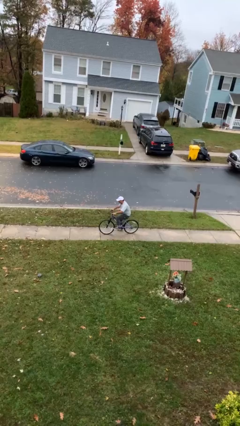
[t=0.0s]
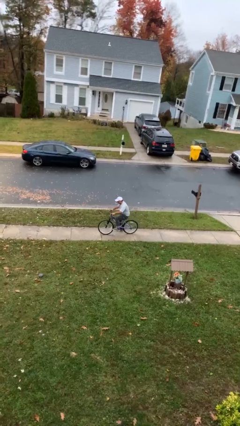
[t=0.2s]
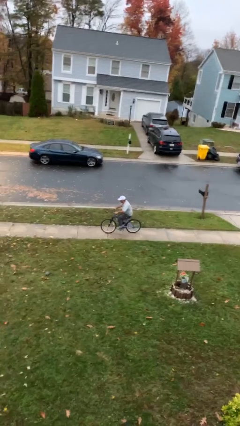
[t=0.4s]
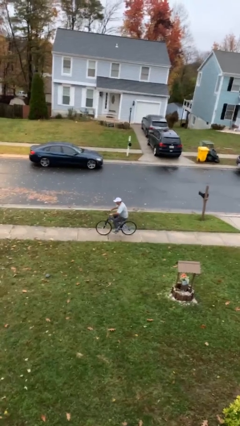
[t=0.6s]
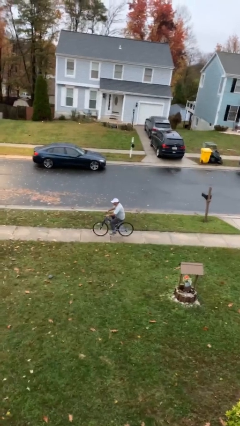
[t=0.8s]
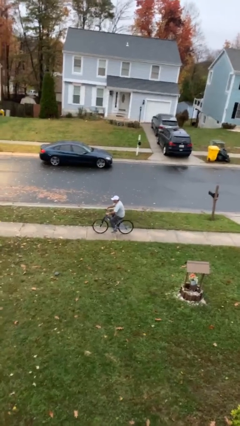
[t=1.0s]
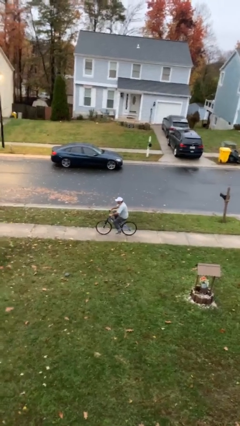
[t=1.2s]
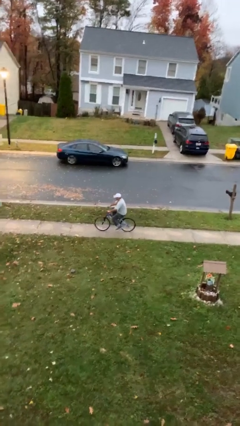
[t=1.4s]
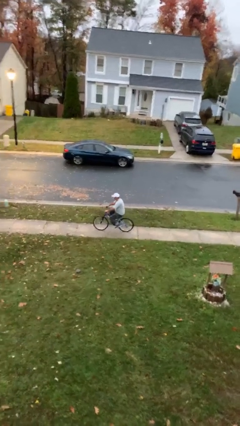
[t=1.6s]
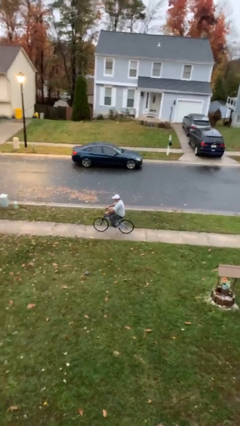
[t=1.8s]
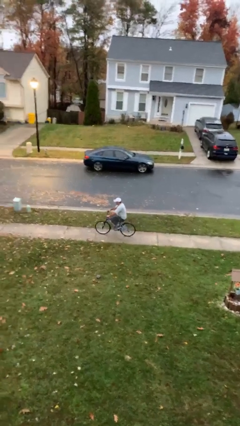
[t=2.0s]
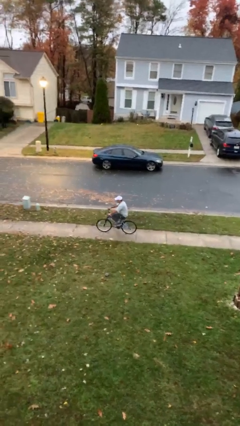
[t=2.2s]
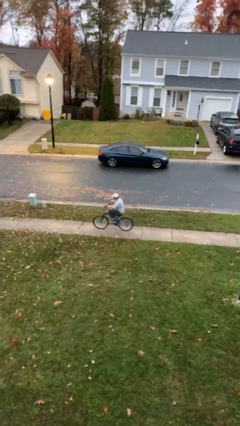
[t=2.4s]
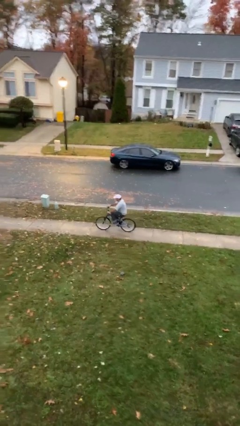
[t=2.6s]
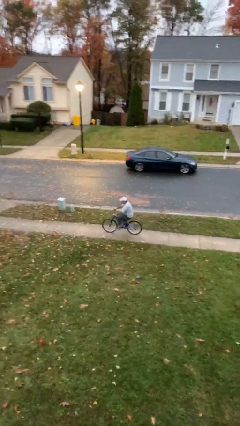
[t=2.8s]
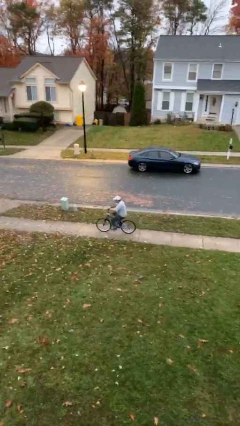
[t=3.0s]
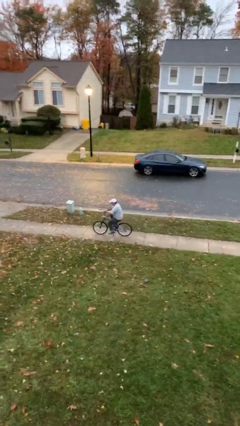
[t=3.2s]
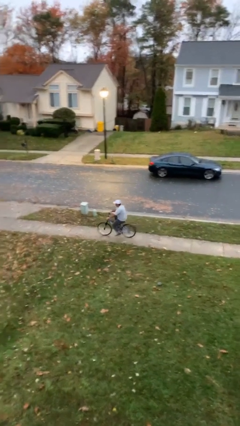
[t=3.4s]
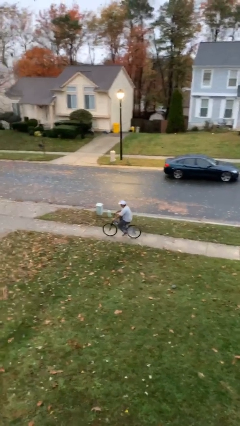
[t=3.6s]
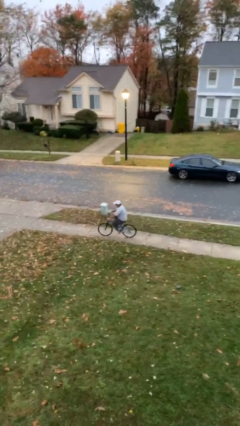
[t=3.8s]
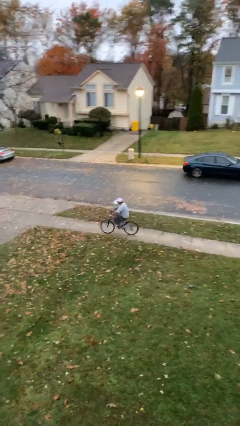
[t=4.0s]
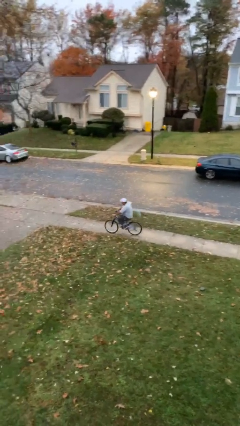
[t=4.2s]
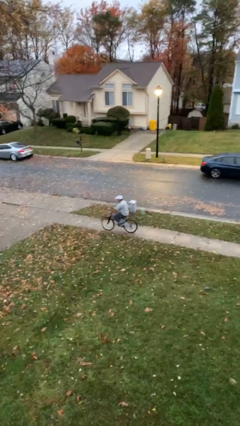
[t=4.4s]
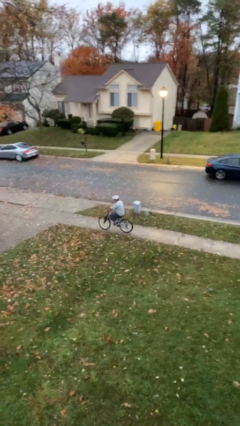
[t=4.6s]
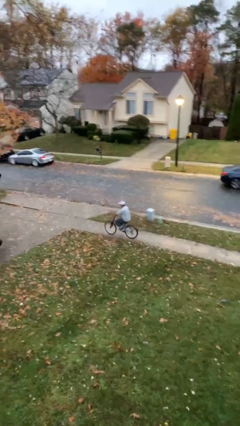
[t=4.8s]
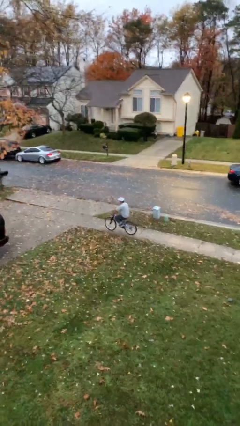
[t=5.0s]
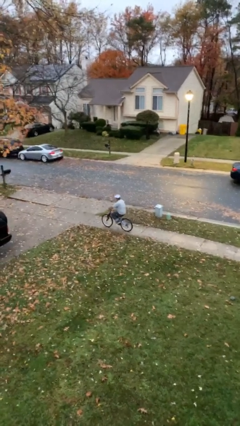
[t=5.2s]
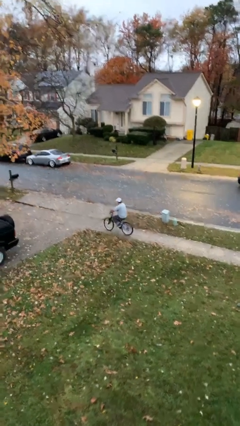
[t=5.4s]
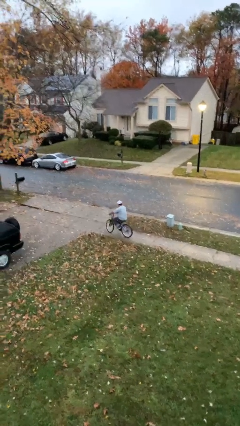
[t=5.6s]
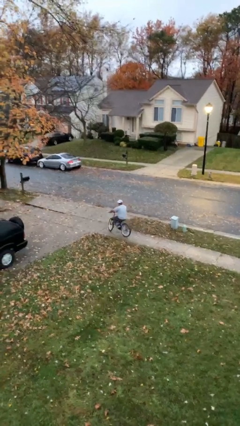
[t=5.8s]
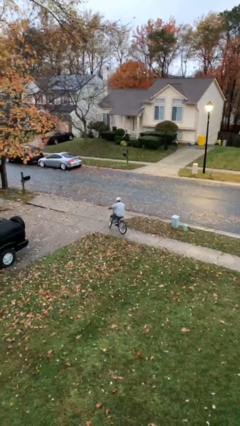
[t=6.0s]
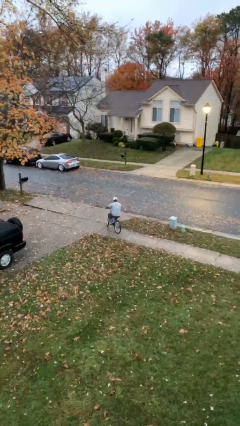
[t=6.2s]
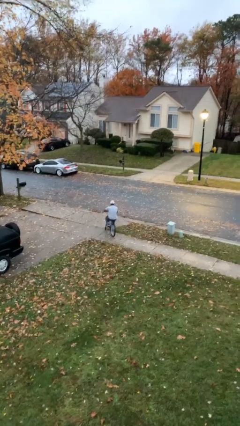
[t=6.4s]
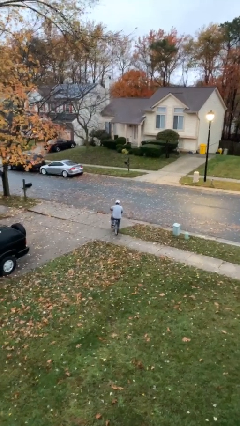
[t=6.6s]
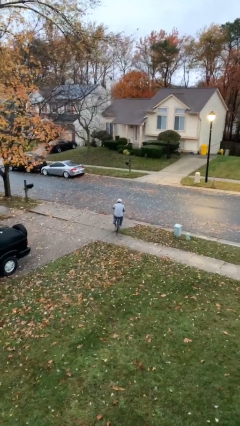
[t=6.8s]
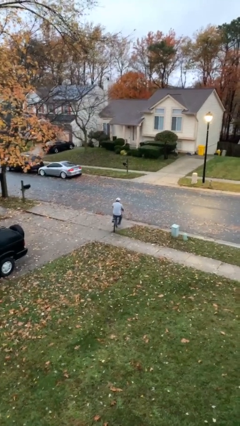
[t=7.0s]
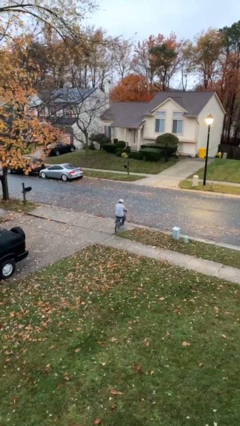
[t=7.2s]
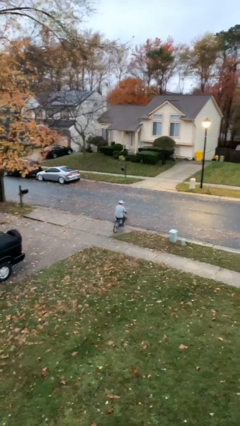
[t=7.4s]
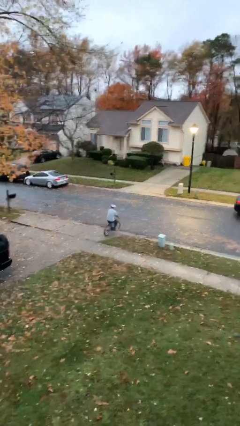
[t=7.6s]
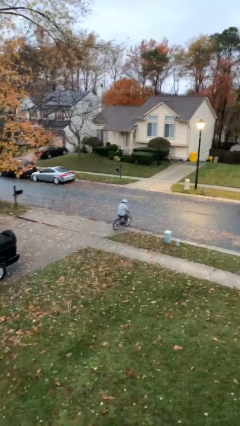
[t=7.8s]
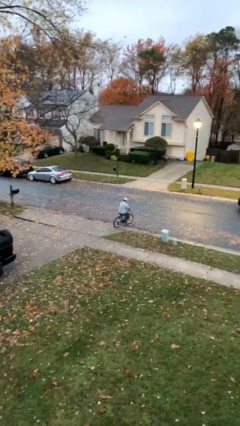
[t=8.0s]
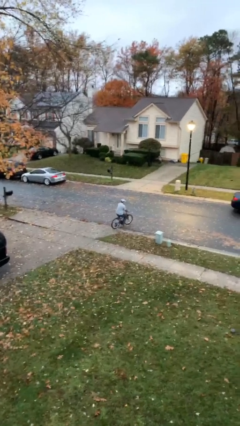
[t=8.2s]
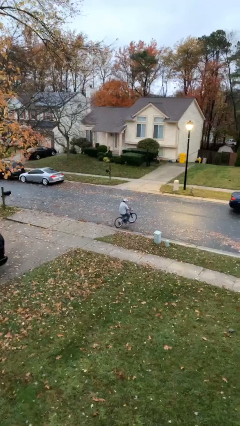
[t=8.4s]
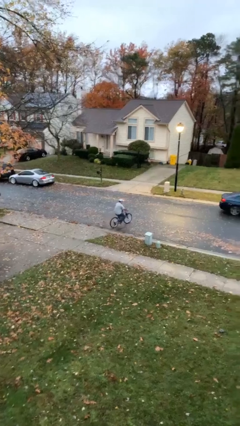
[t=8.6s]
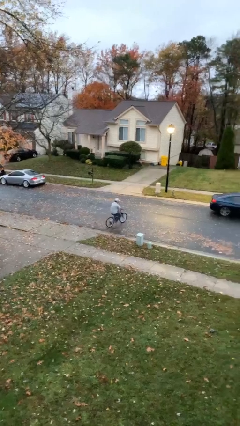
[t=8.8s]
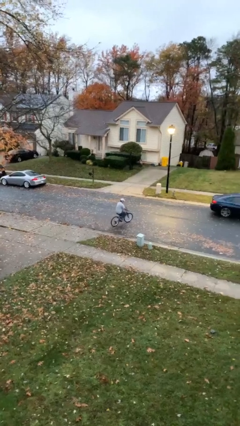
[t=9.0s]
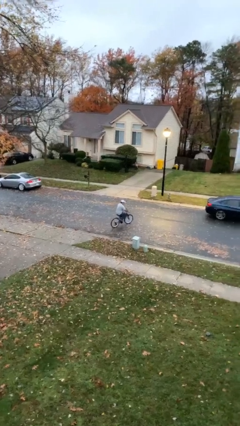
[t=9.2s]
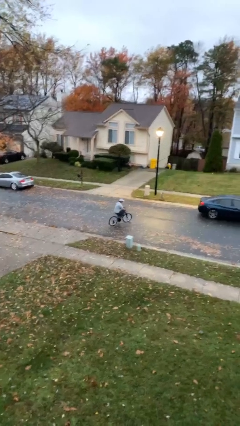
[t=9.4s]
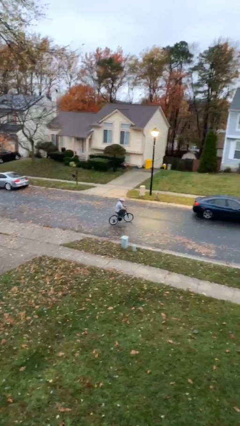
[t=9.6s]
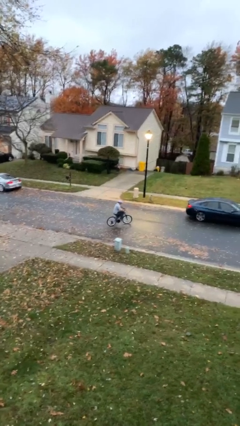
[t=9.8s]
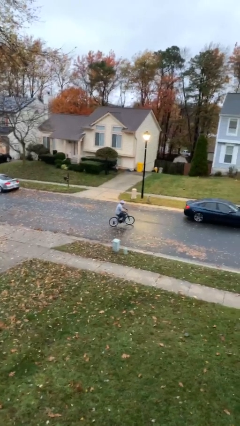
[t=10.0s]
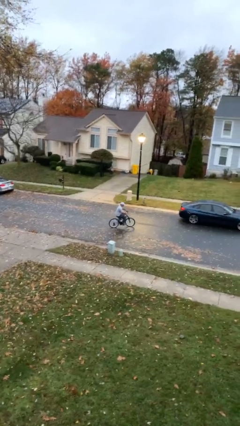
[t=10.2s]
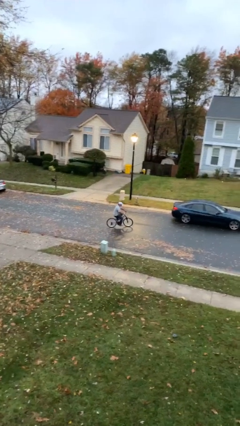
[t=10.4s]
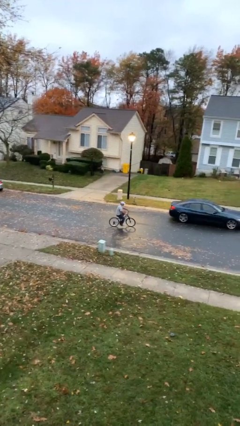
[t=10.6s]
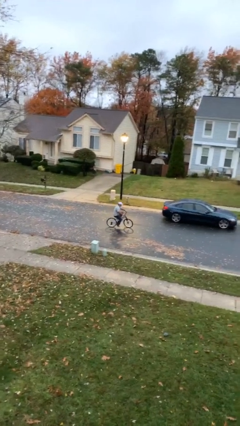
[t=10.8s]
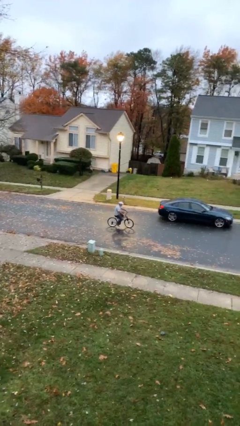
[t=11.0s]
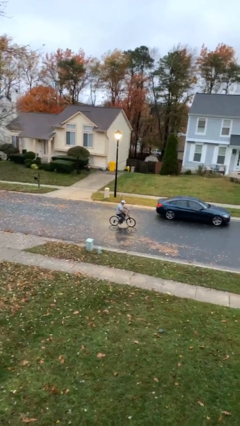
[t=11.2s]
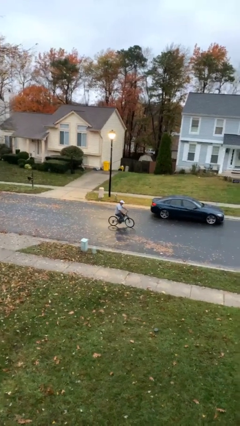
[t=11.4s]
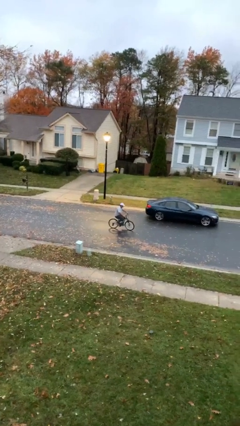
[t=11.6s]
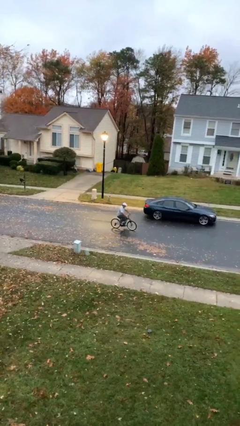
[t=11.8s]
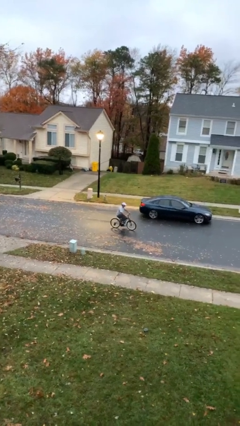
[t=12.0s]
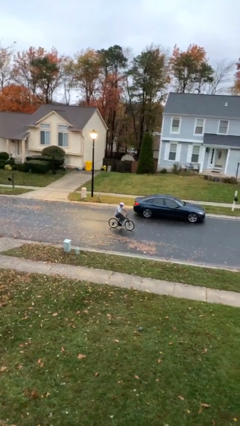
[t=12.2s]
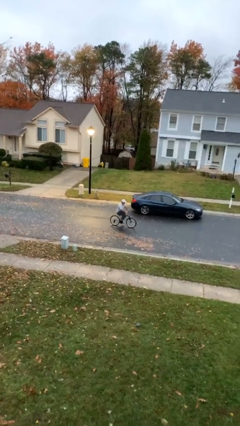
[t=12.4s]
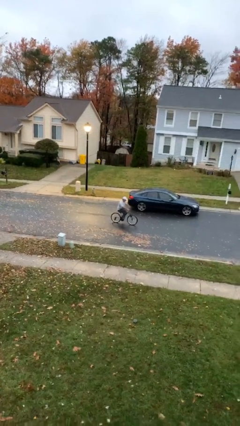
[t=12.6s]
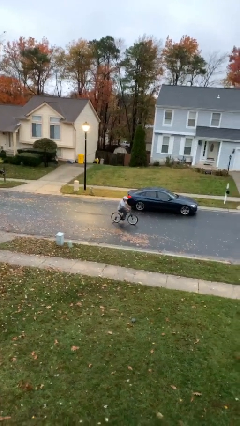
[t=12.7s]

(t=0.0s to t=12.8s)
person rides bicycle

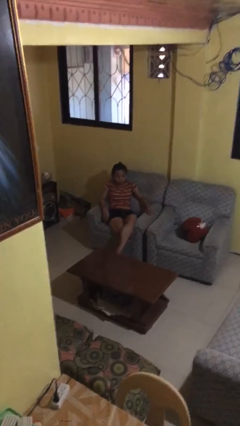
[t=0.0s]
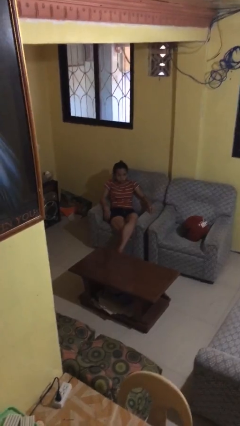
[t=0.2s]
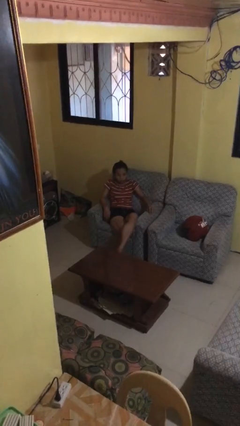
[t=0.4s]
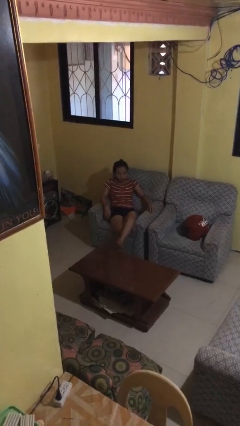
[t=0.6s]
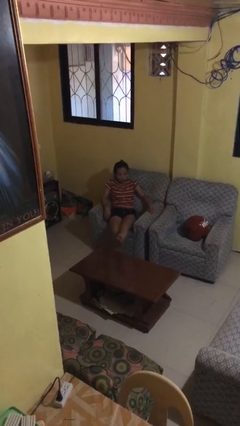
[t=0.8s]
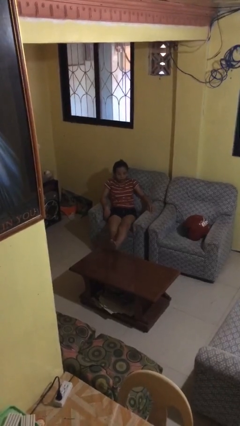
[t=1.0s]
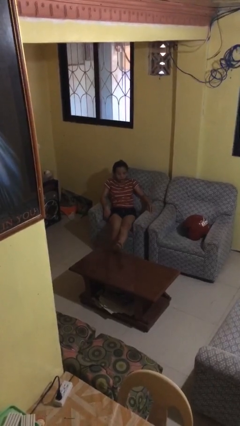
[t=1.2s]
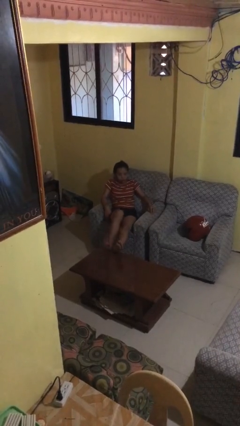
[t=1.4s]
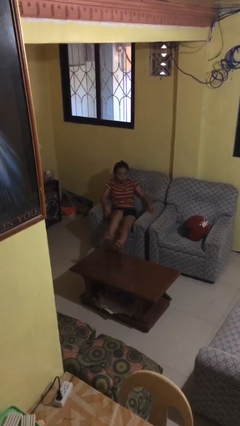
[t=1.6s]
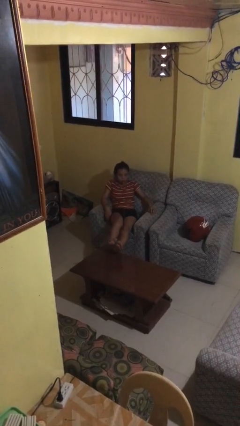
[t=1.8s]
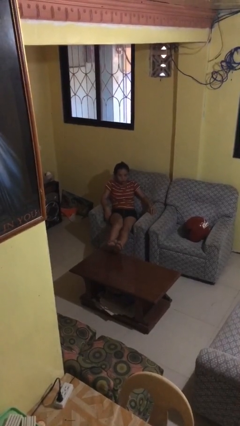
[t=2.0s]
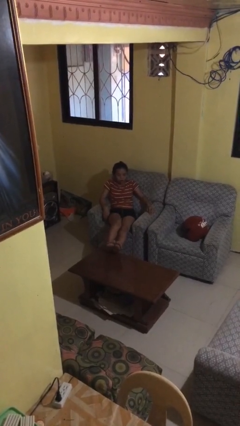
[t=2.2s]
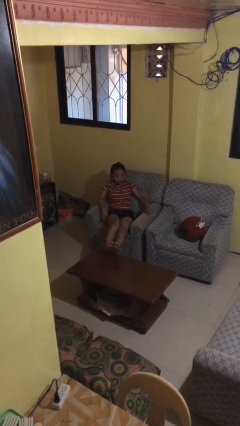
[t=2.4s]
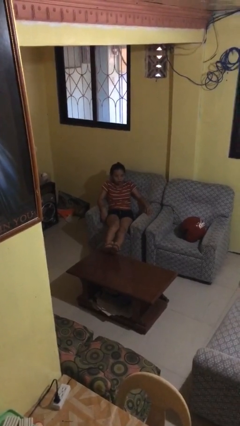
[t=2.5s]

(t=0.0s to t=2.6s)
person puts feet up

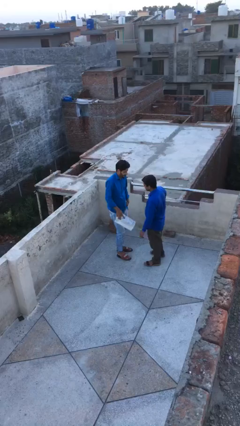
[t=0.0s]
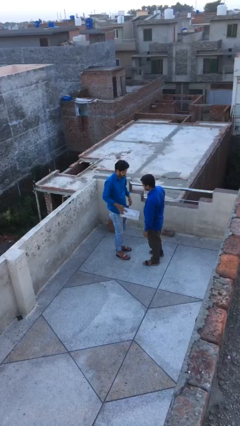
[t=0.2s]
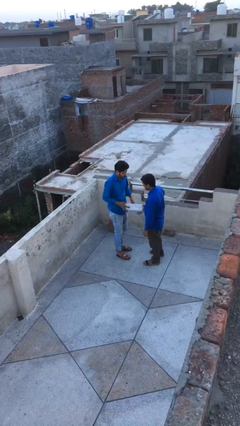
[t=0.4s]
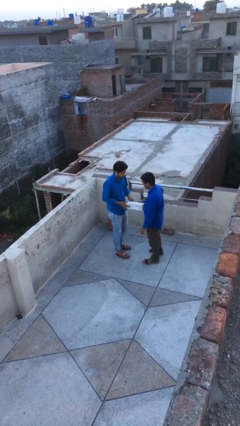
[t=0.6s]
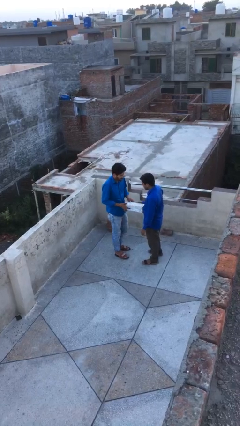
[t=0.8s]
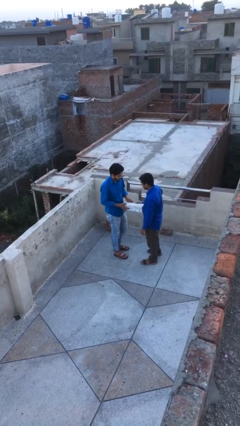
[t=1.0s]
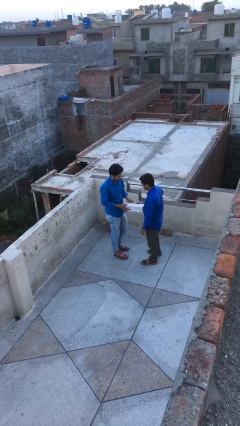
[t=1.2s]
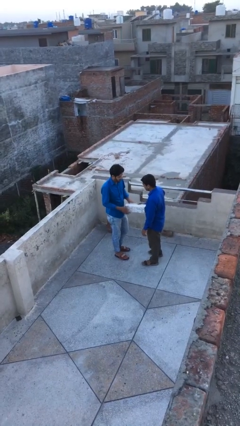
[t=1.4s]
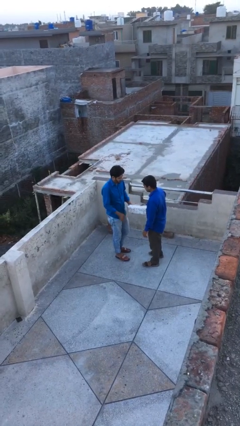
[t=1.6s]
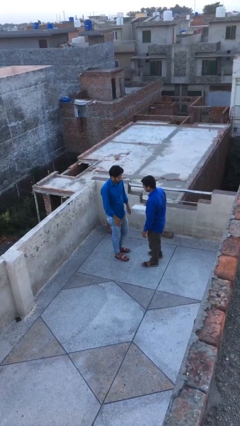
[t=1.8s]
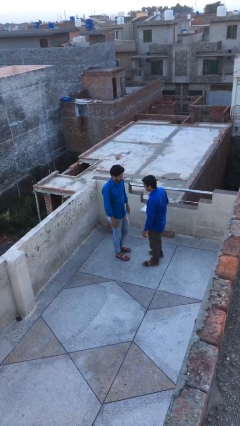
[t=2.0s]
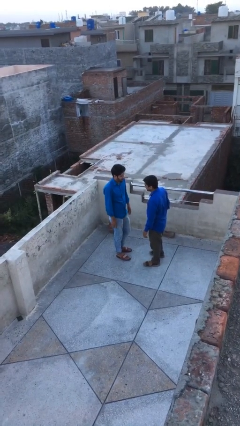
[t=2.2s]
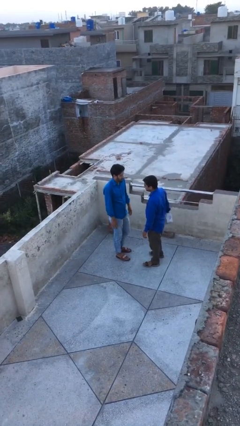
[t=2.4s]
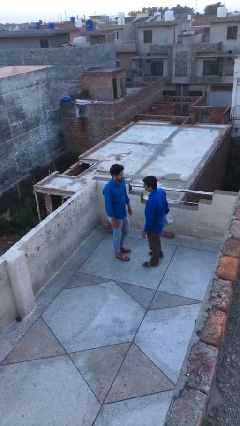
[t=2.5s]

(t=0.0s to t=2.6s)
person transfers object to person
